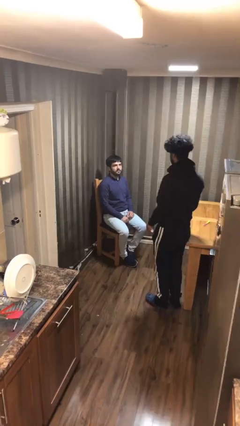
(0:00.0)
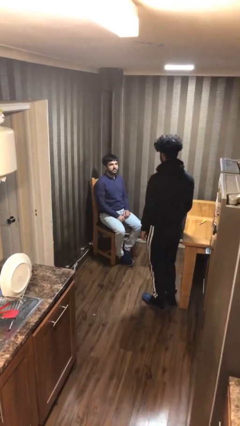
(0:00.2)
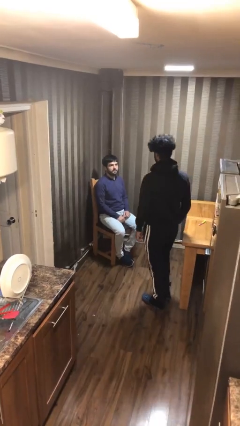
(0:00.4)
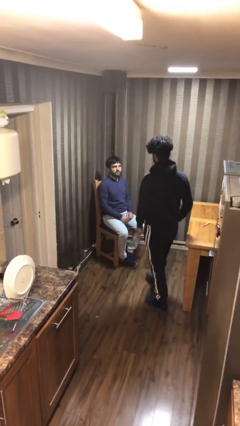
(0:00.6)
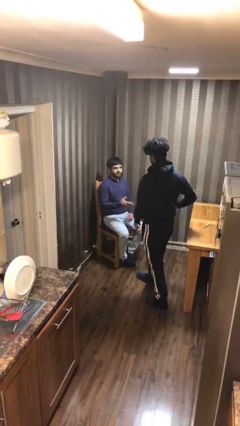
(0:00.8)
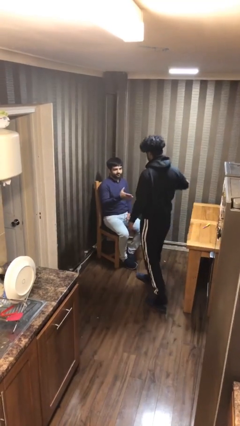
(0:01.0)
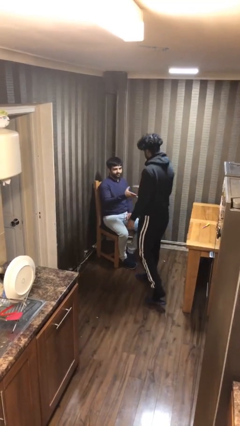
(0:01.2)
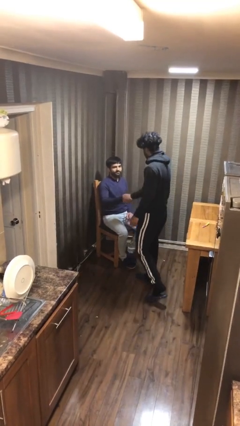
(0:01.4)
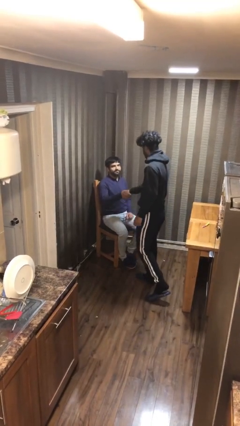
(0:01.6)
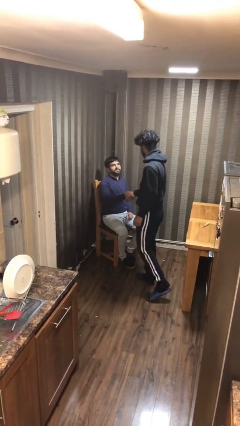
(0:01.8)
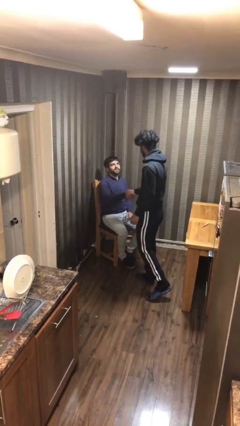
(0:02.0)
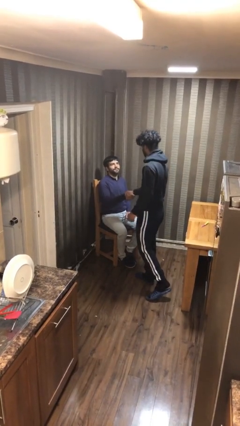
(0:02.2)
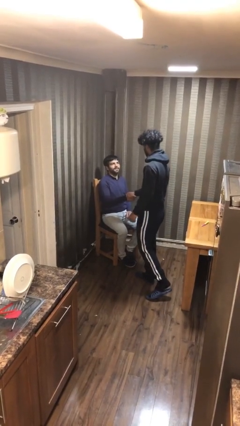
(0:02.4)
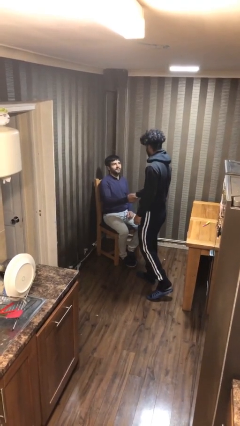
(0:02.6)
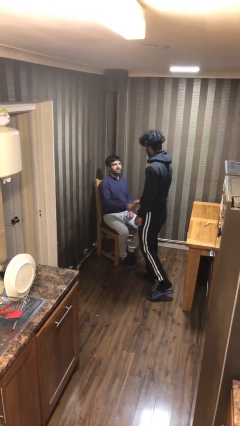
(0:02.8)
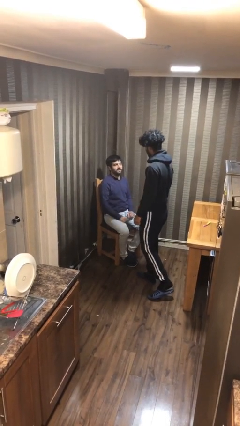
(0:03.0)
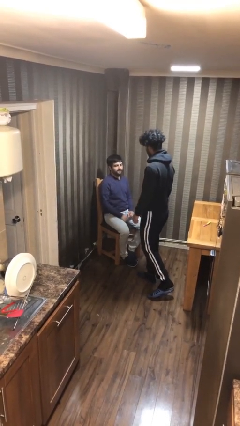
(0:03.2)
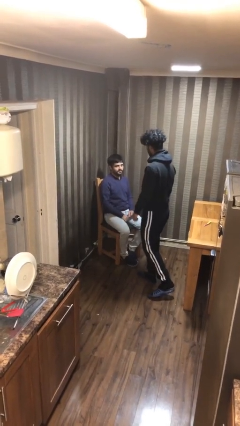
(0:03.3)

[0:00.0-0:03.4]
person shakes hand

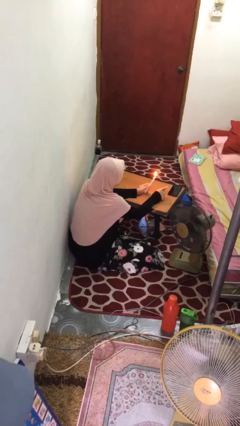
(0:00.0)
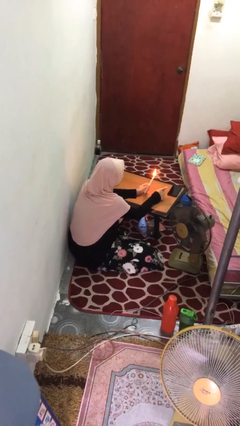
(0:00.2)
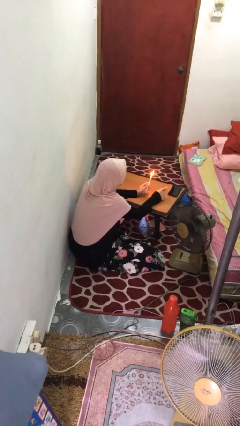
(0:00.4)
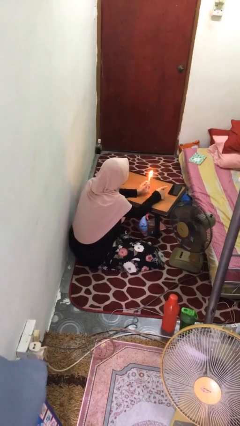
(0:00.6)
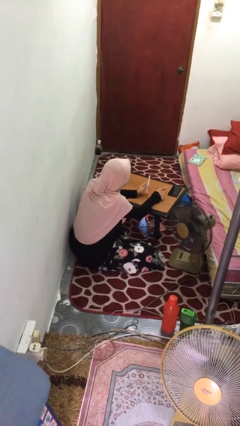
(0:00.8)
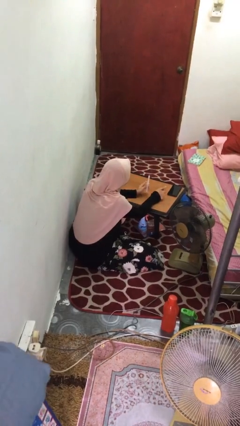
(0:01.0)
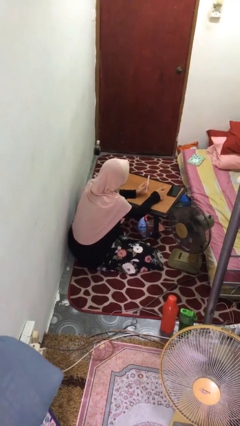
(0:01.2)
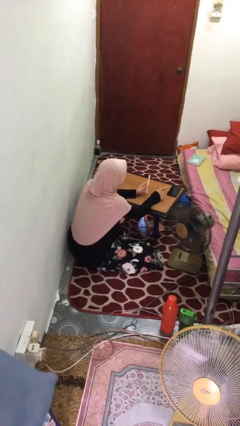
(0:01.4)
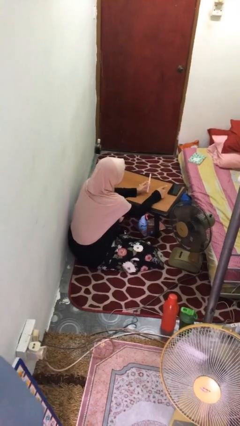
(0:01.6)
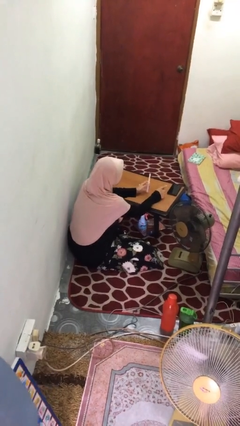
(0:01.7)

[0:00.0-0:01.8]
person extinguishes candle

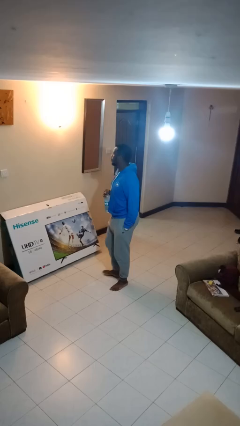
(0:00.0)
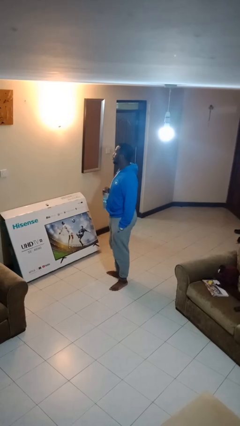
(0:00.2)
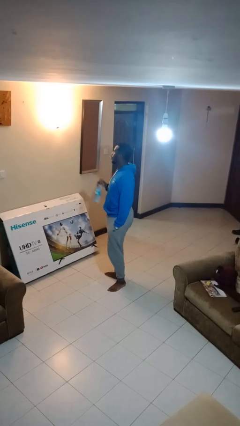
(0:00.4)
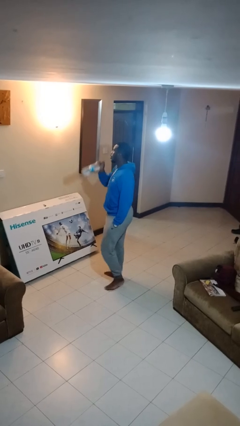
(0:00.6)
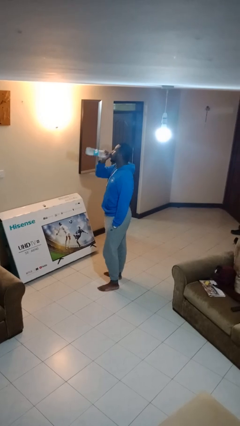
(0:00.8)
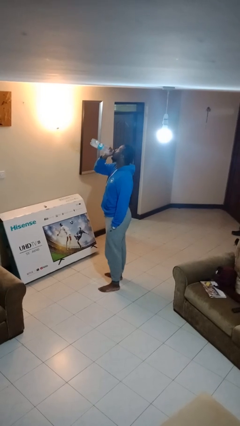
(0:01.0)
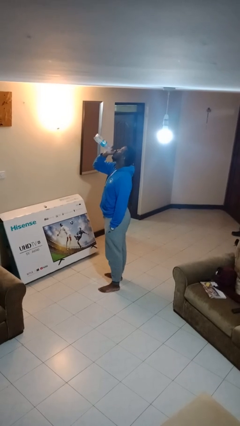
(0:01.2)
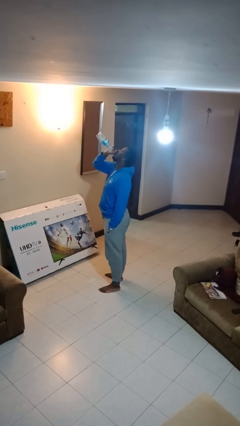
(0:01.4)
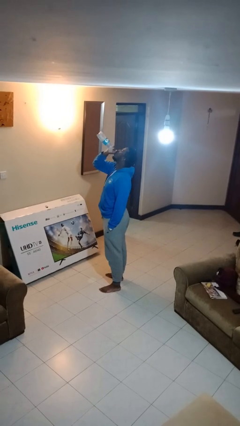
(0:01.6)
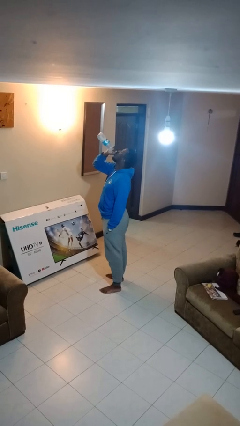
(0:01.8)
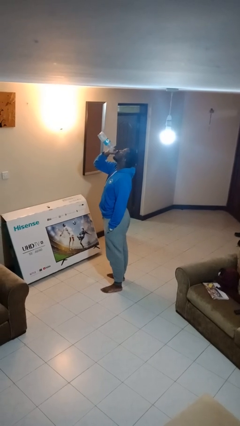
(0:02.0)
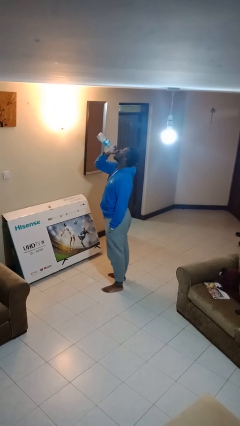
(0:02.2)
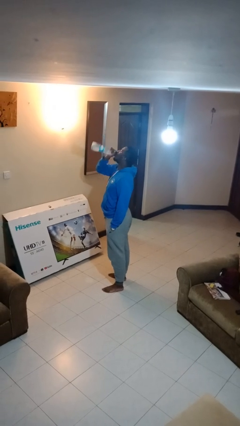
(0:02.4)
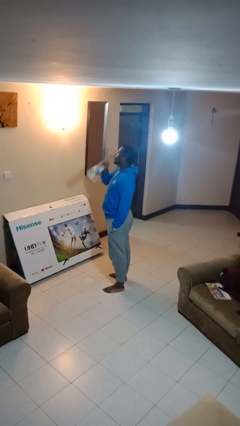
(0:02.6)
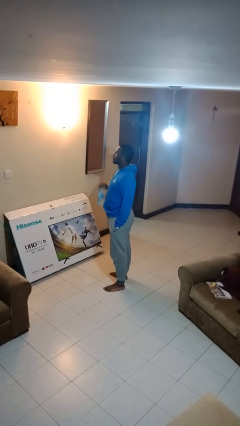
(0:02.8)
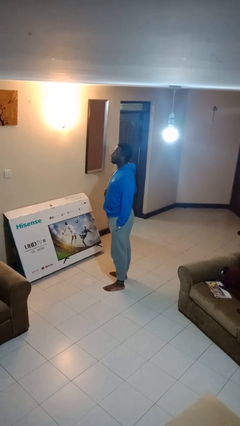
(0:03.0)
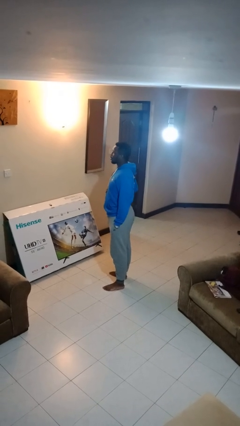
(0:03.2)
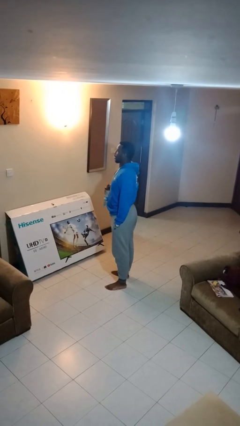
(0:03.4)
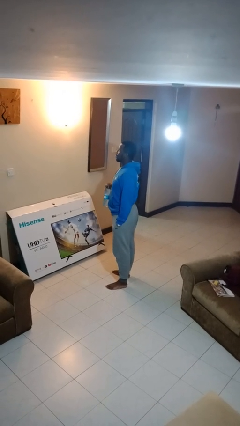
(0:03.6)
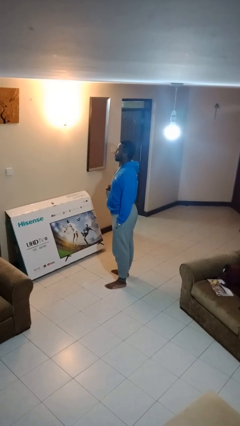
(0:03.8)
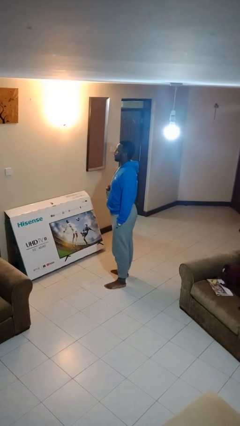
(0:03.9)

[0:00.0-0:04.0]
person drinks from bottle

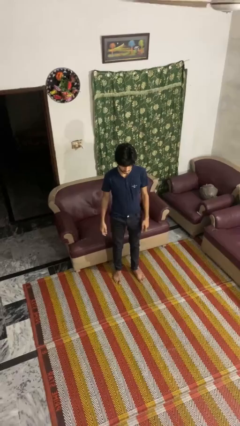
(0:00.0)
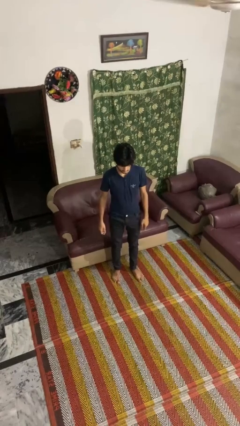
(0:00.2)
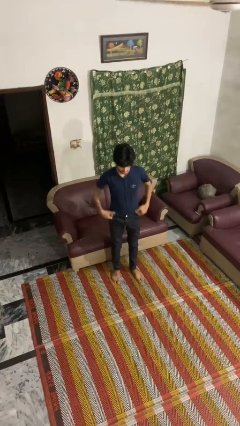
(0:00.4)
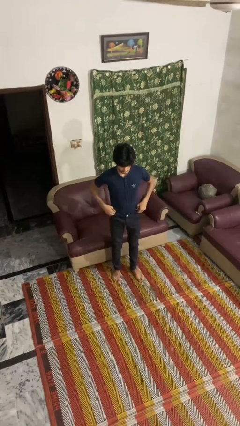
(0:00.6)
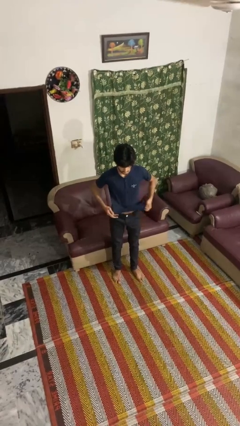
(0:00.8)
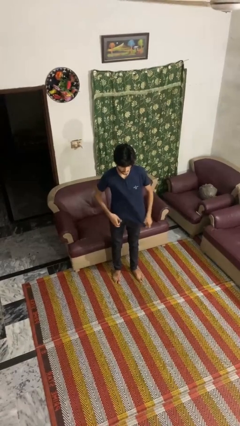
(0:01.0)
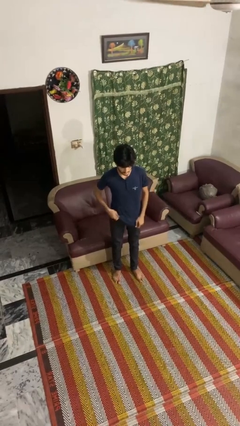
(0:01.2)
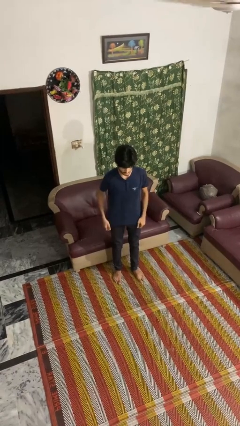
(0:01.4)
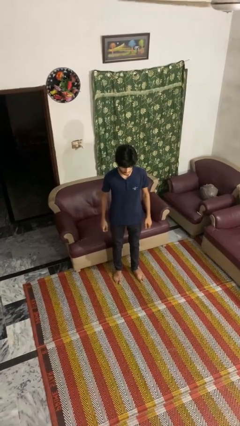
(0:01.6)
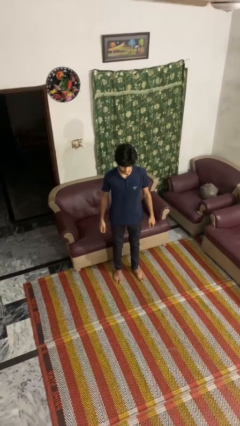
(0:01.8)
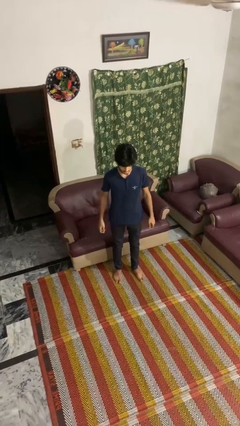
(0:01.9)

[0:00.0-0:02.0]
person untucks shirt

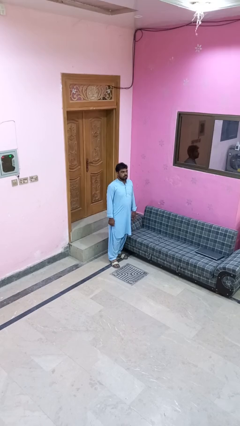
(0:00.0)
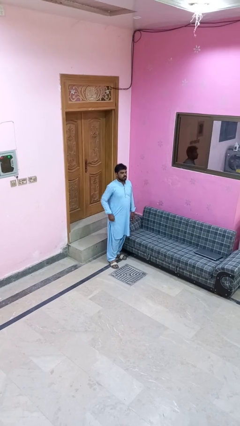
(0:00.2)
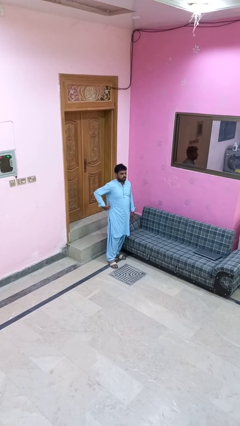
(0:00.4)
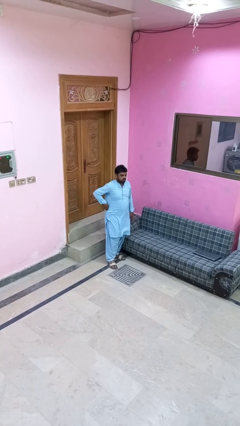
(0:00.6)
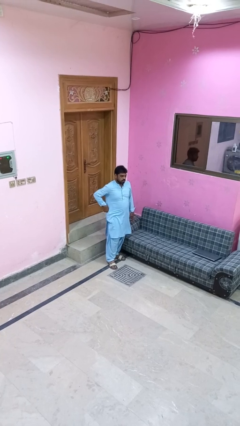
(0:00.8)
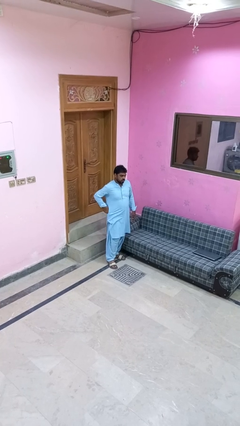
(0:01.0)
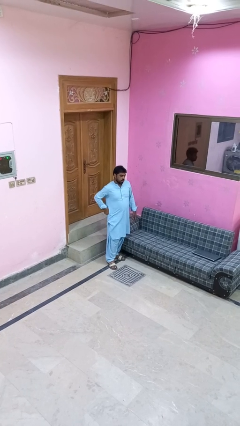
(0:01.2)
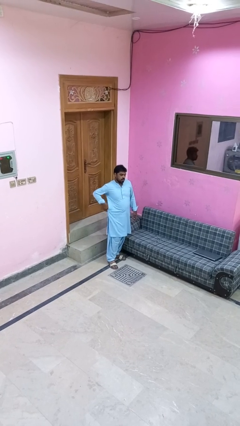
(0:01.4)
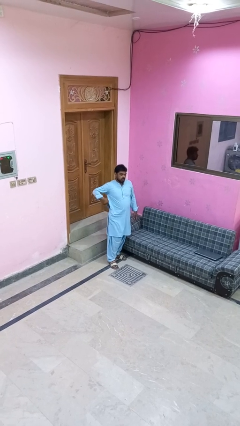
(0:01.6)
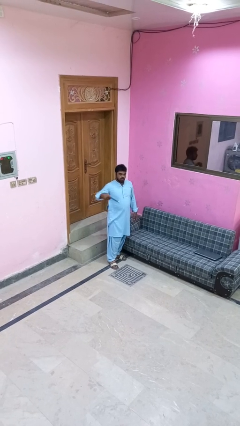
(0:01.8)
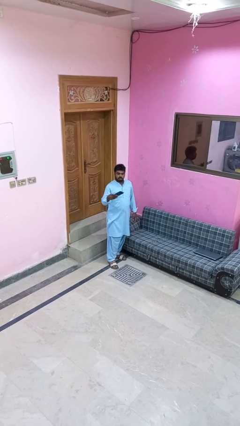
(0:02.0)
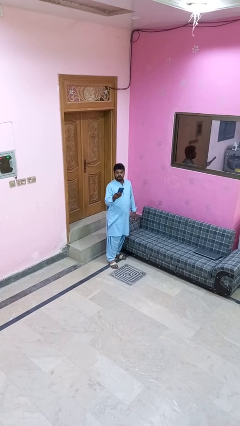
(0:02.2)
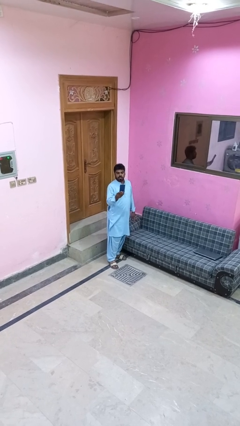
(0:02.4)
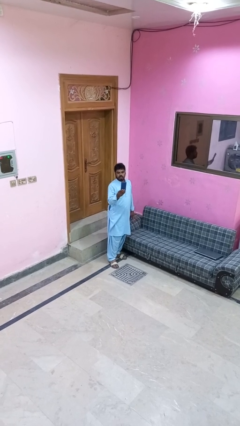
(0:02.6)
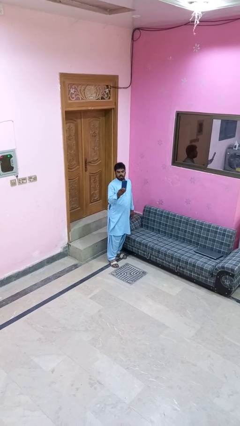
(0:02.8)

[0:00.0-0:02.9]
person takes phone from pocket

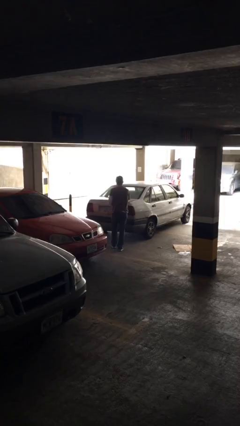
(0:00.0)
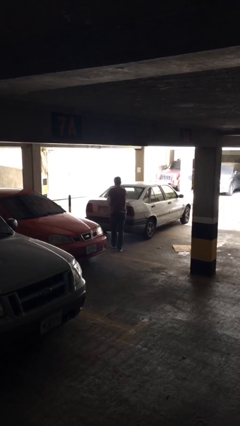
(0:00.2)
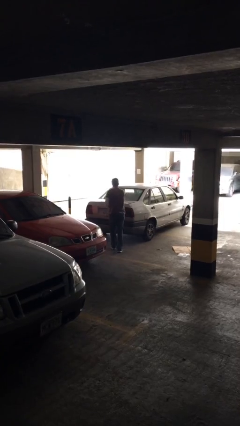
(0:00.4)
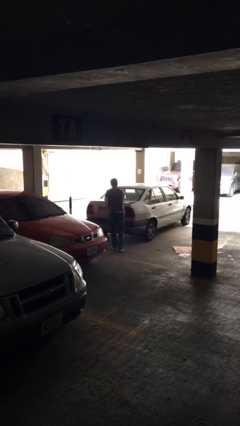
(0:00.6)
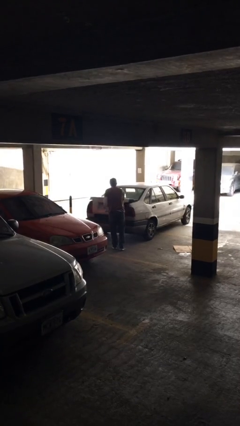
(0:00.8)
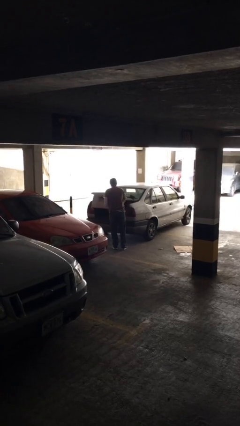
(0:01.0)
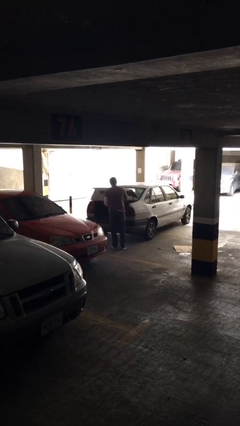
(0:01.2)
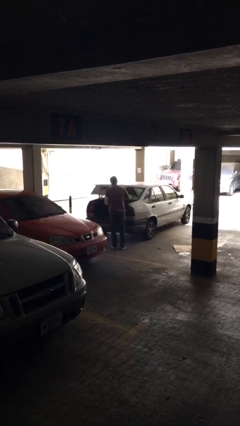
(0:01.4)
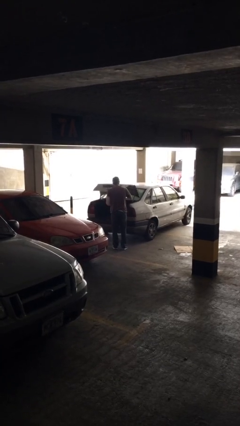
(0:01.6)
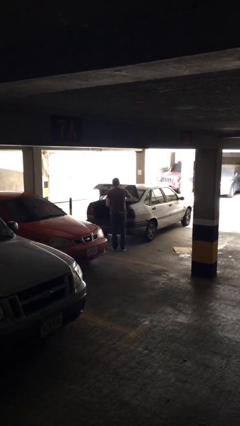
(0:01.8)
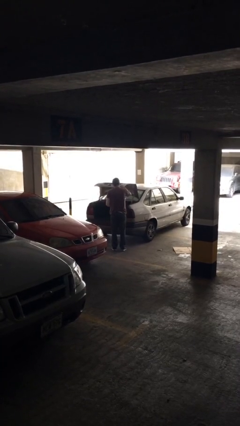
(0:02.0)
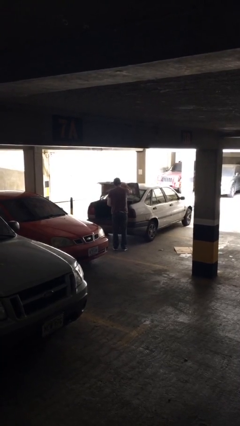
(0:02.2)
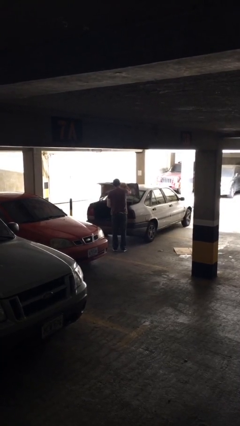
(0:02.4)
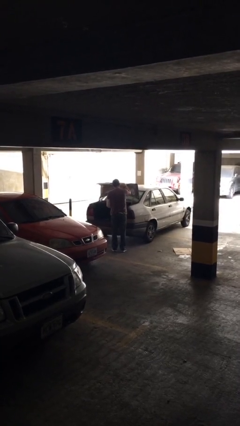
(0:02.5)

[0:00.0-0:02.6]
person opens car trunk

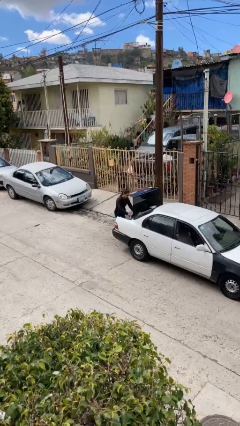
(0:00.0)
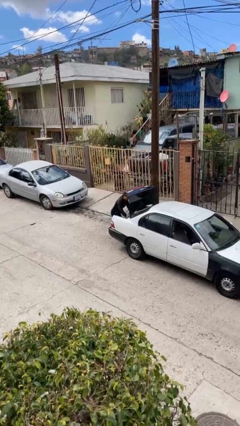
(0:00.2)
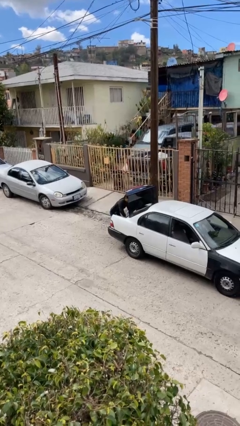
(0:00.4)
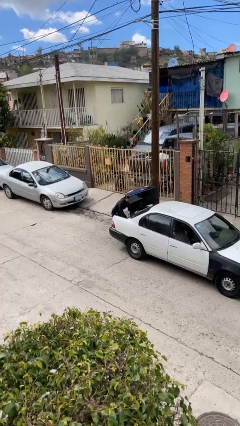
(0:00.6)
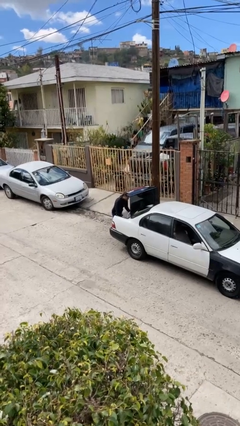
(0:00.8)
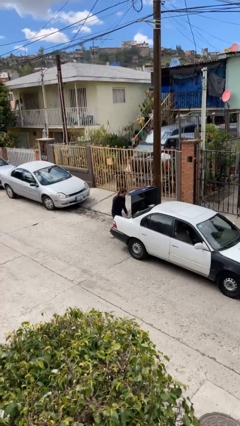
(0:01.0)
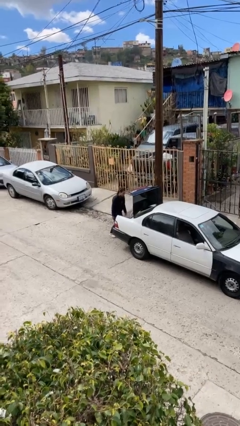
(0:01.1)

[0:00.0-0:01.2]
person loads car
